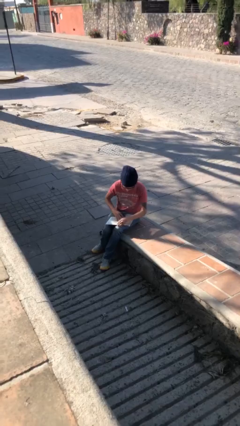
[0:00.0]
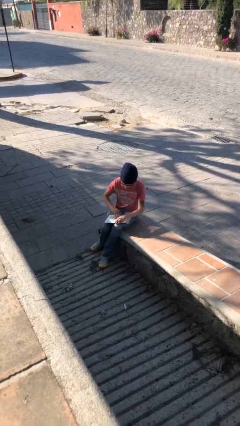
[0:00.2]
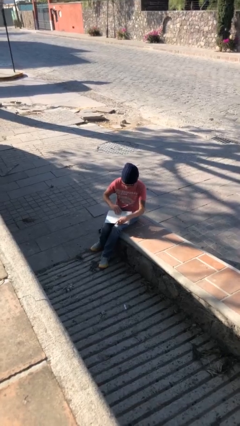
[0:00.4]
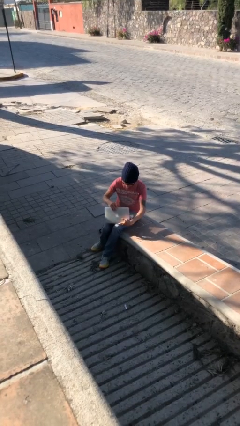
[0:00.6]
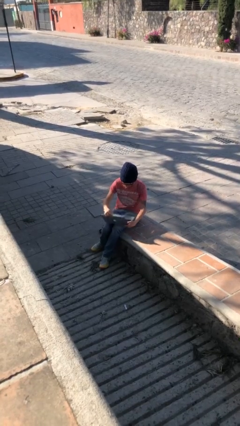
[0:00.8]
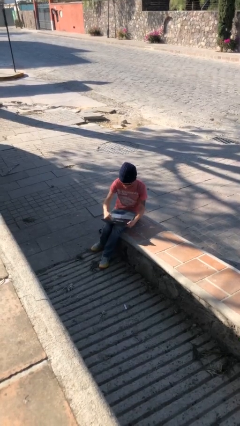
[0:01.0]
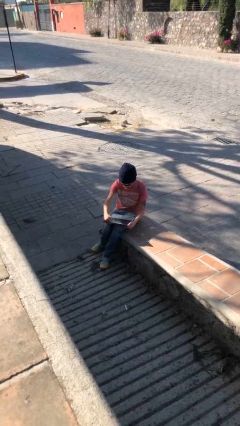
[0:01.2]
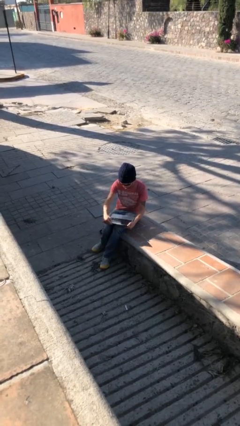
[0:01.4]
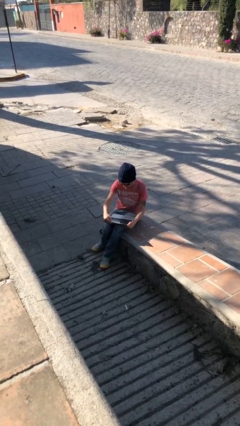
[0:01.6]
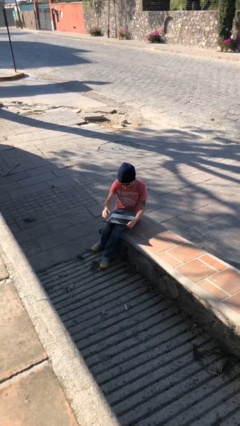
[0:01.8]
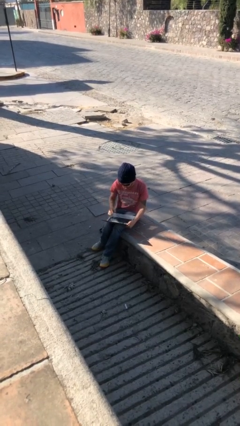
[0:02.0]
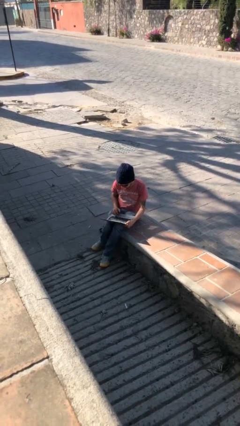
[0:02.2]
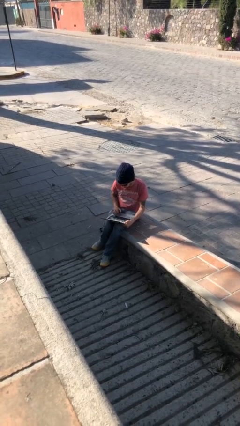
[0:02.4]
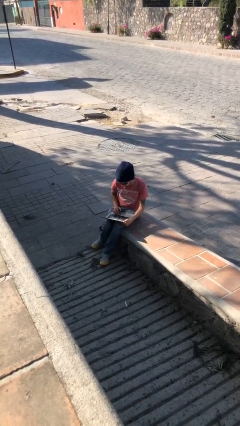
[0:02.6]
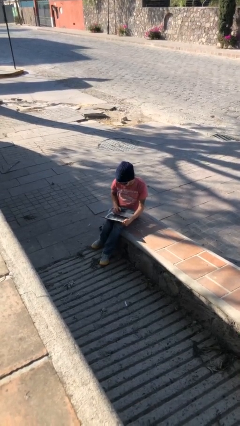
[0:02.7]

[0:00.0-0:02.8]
person interacts with laptop

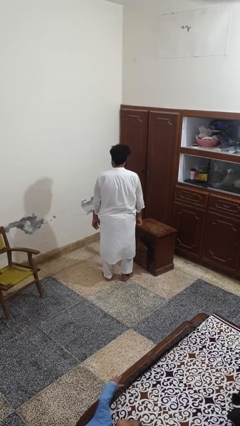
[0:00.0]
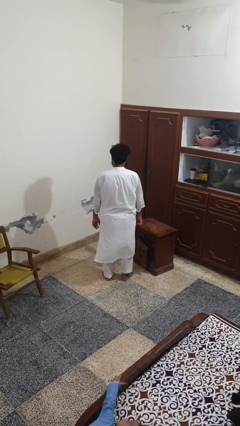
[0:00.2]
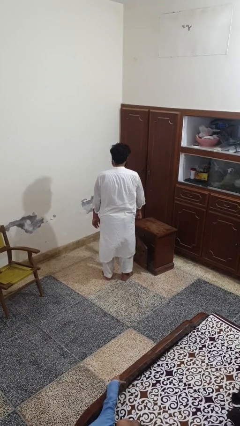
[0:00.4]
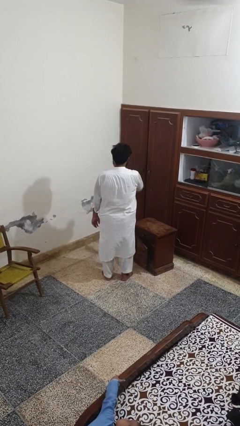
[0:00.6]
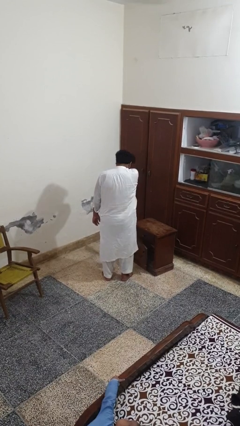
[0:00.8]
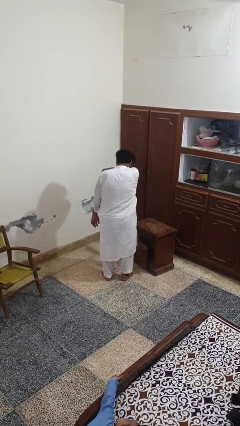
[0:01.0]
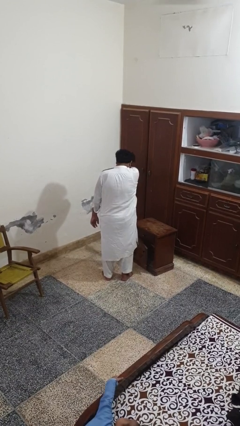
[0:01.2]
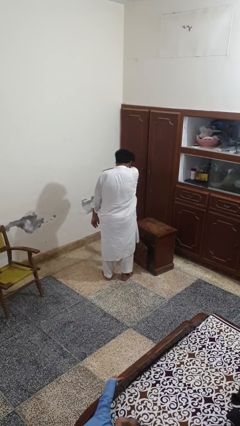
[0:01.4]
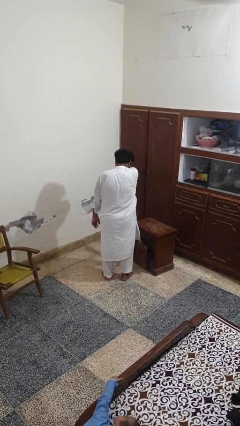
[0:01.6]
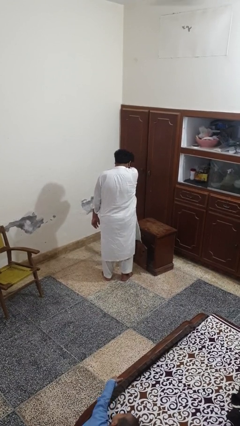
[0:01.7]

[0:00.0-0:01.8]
person sneezes into arm

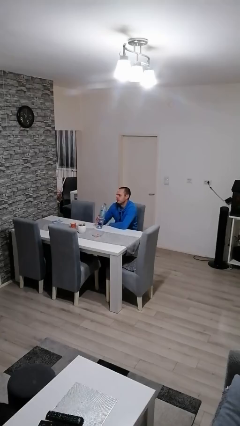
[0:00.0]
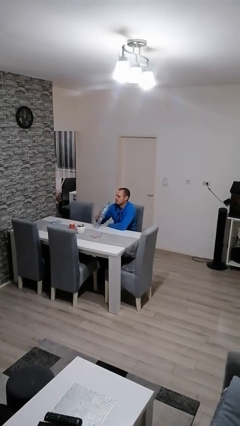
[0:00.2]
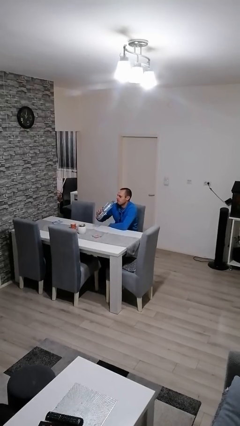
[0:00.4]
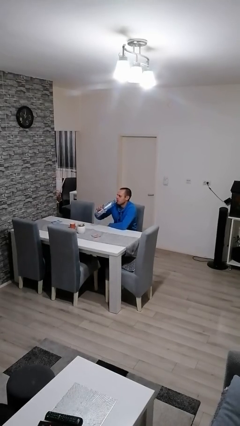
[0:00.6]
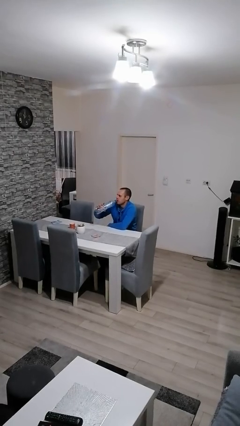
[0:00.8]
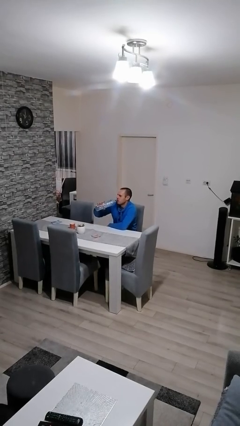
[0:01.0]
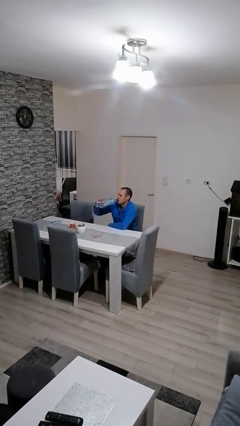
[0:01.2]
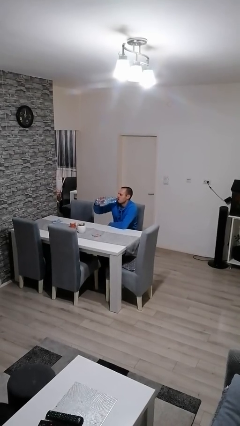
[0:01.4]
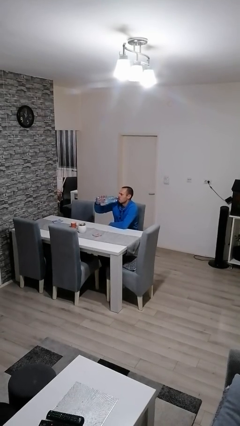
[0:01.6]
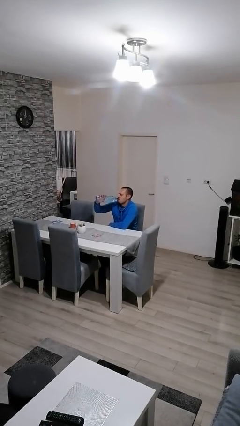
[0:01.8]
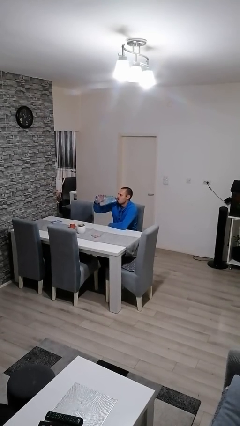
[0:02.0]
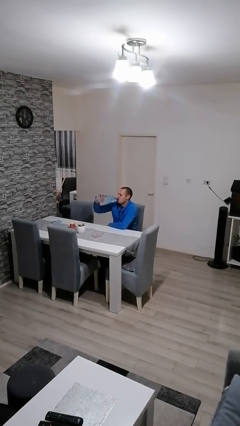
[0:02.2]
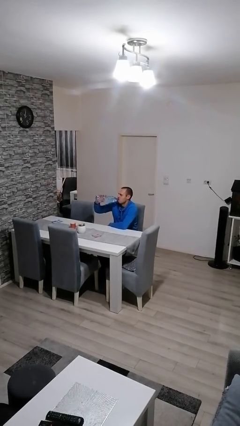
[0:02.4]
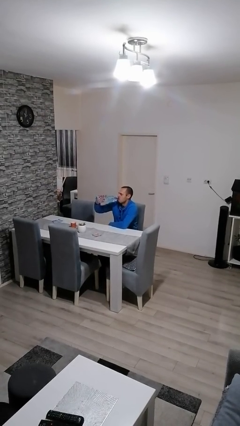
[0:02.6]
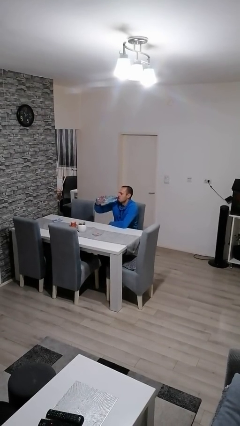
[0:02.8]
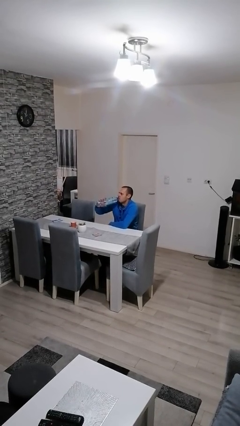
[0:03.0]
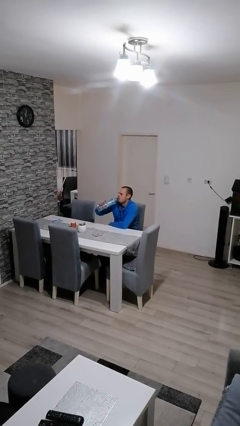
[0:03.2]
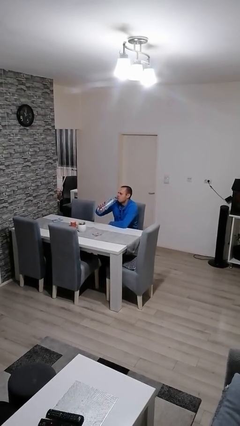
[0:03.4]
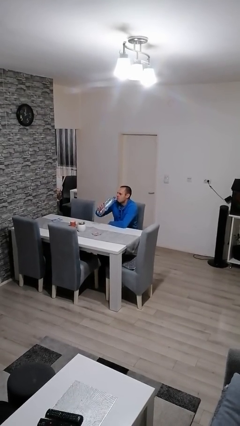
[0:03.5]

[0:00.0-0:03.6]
person drinks from bottle

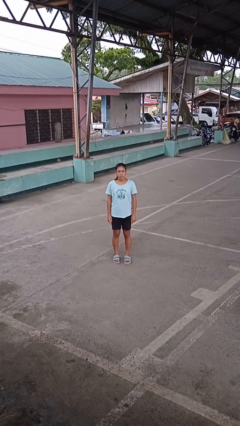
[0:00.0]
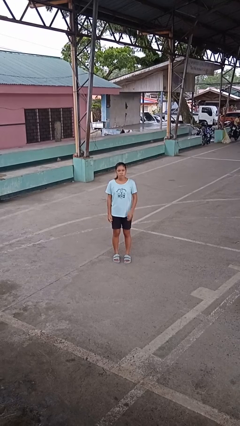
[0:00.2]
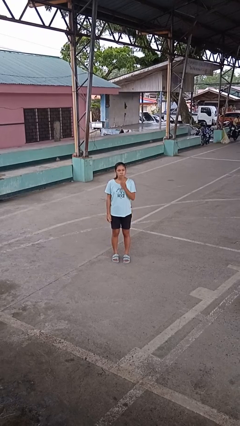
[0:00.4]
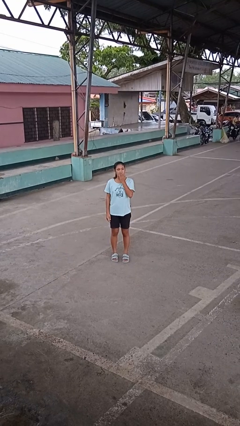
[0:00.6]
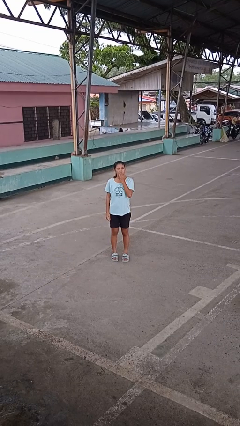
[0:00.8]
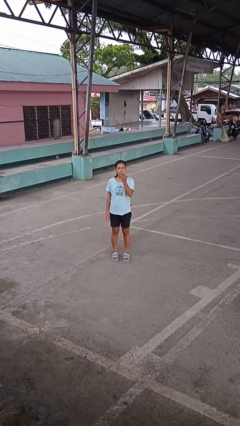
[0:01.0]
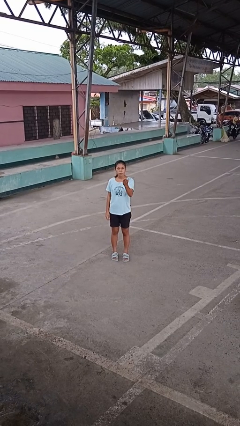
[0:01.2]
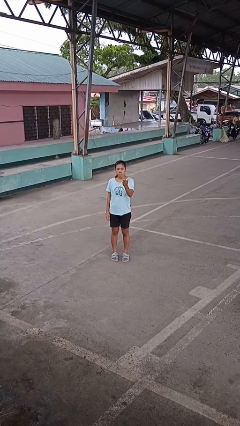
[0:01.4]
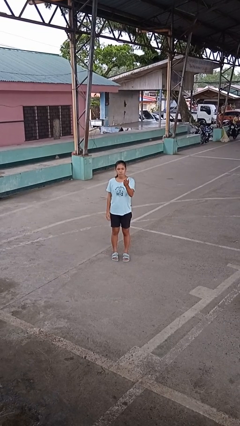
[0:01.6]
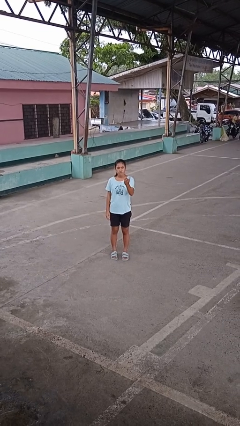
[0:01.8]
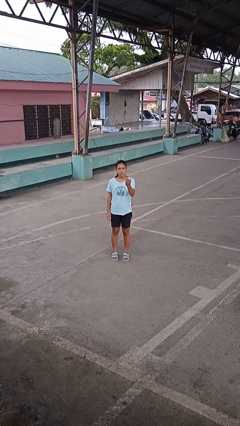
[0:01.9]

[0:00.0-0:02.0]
person gestures blow kiss

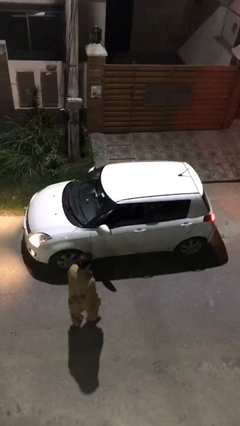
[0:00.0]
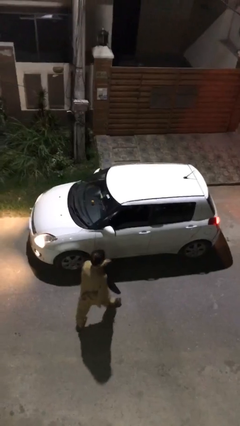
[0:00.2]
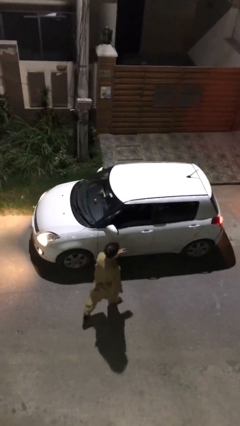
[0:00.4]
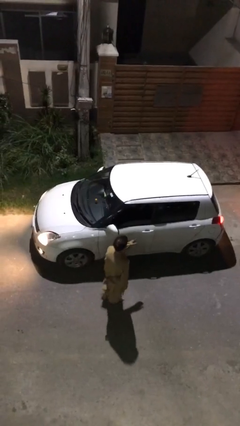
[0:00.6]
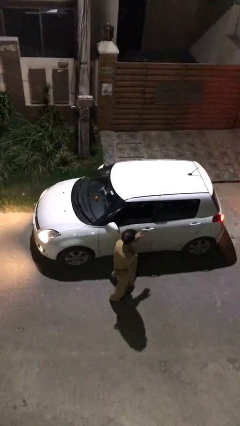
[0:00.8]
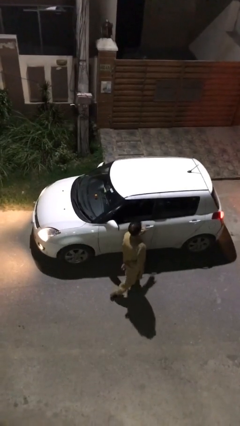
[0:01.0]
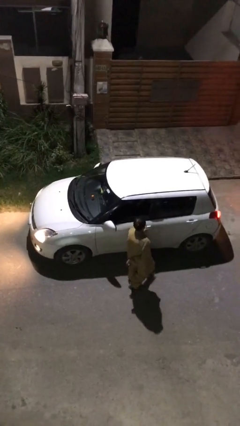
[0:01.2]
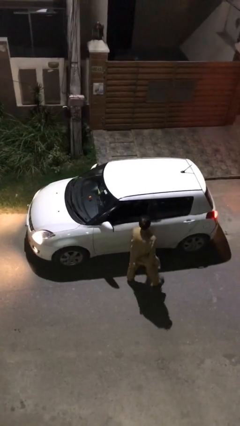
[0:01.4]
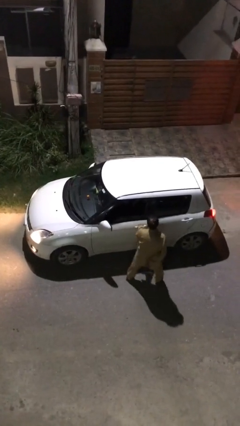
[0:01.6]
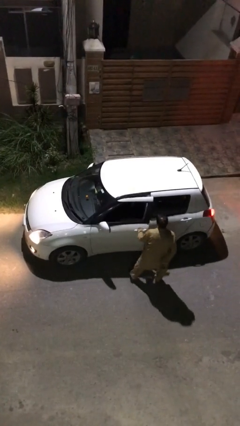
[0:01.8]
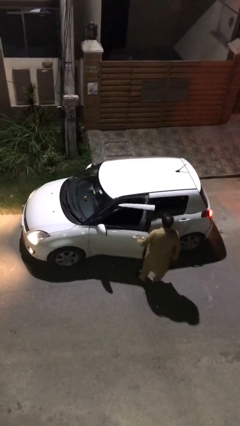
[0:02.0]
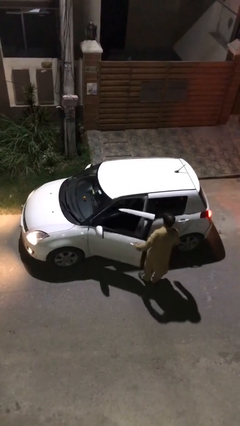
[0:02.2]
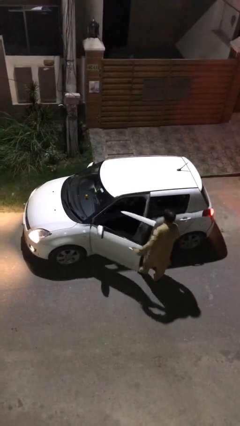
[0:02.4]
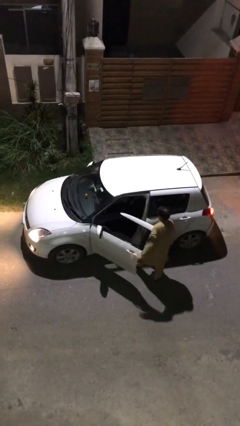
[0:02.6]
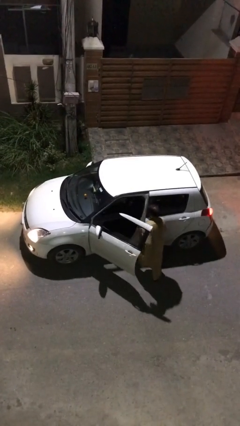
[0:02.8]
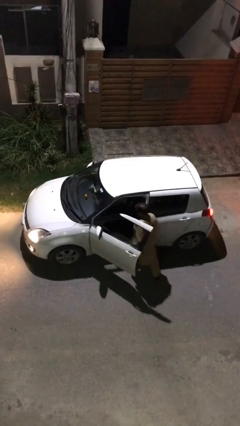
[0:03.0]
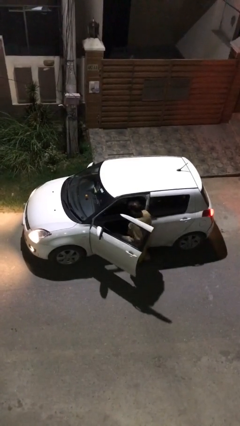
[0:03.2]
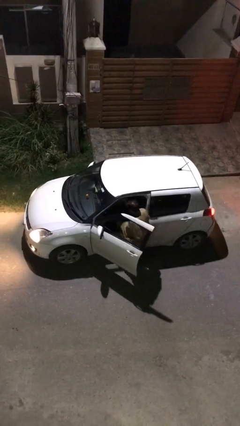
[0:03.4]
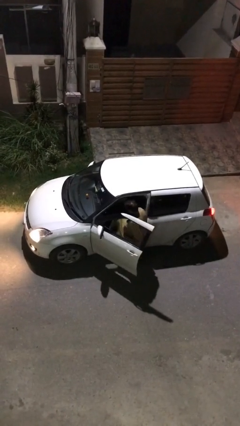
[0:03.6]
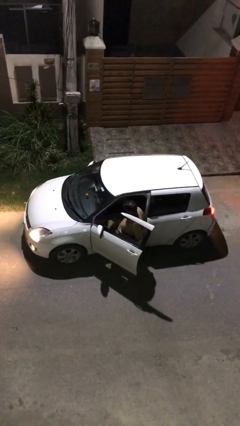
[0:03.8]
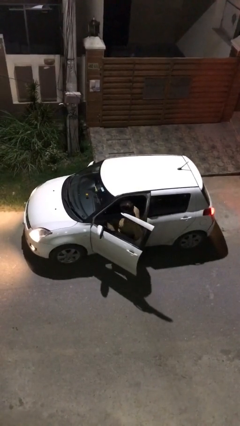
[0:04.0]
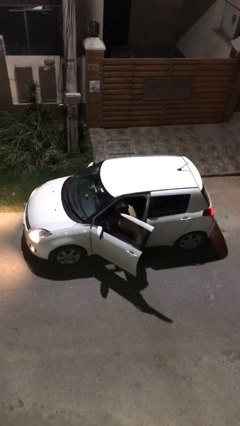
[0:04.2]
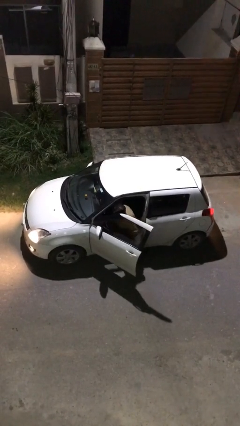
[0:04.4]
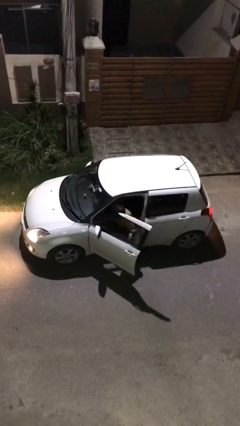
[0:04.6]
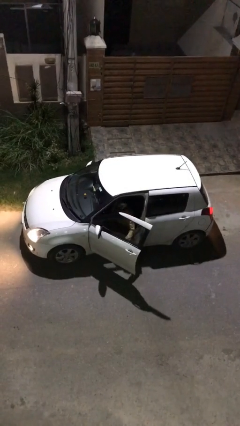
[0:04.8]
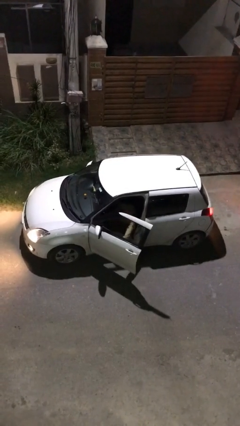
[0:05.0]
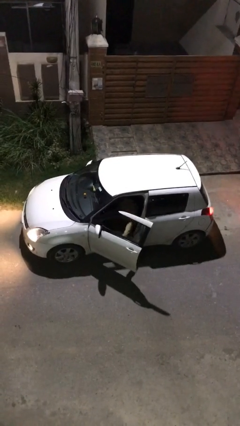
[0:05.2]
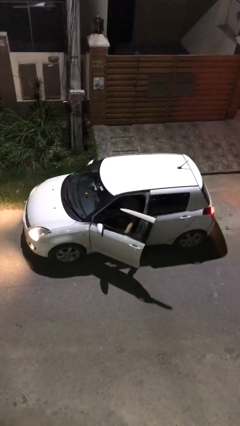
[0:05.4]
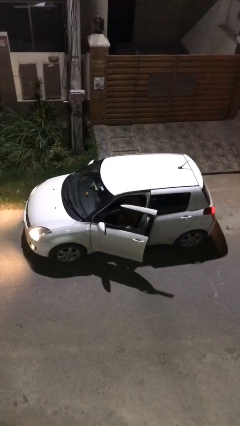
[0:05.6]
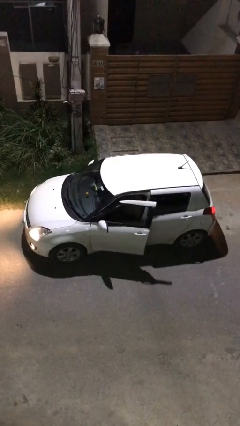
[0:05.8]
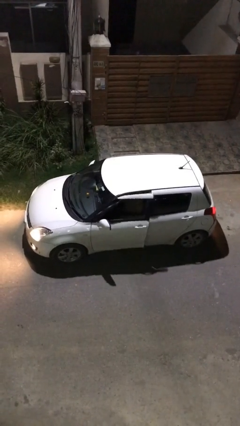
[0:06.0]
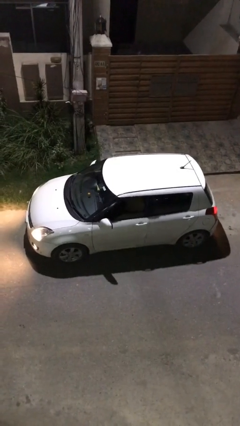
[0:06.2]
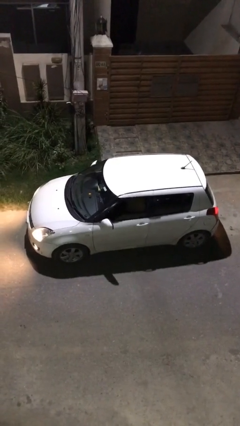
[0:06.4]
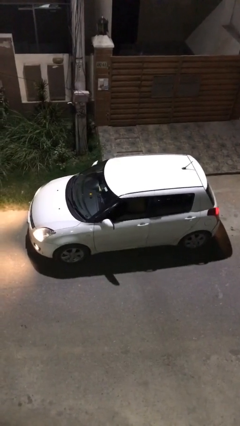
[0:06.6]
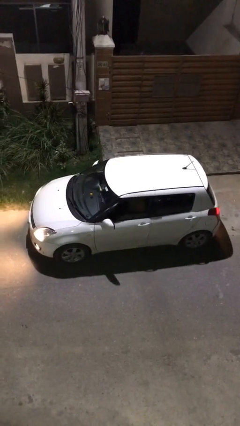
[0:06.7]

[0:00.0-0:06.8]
car picks up person

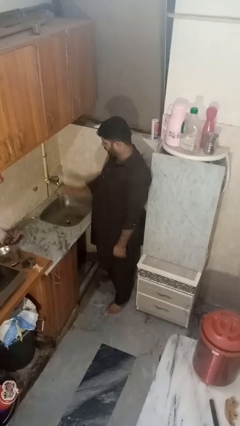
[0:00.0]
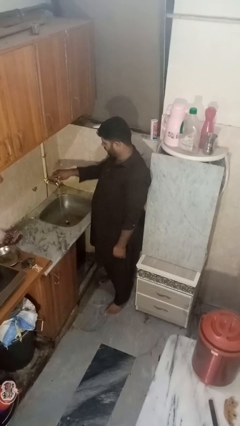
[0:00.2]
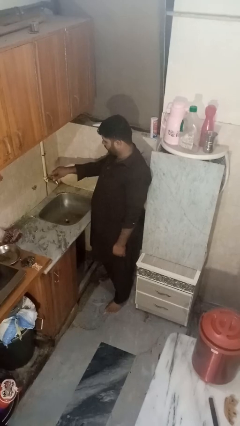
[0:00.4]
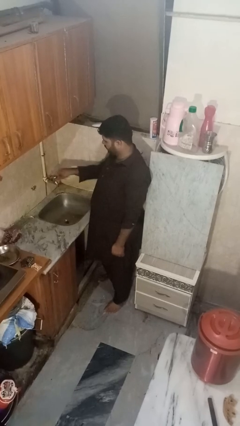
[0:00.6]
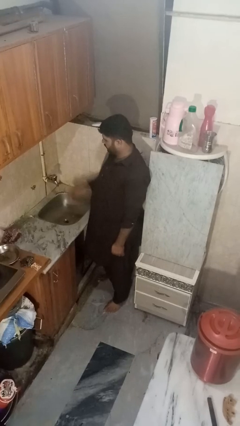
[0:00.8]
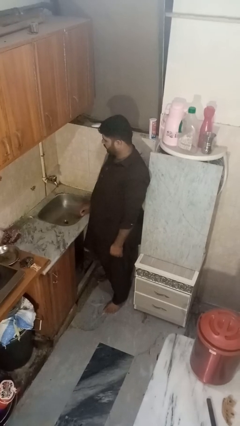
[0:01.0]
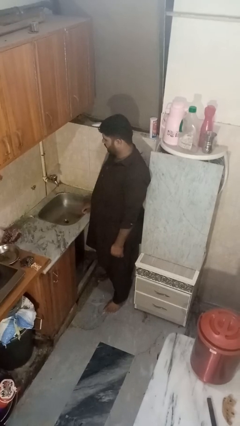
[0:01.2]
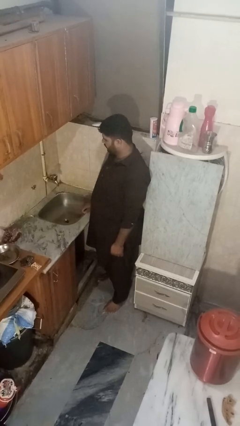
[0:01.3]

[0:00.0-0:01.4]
person turns off faucet
